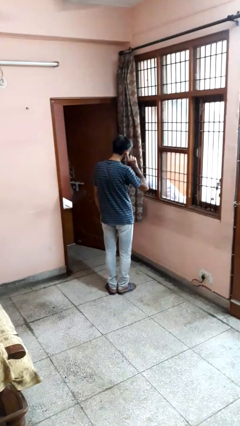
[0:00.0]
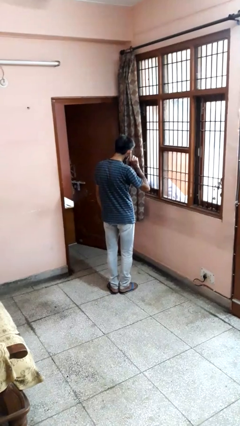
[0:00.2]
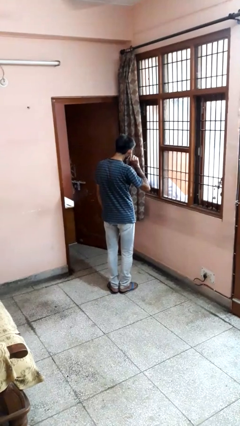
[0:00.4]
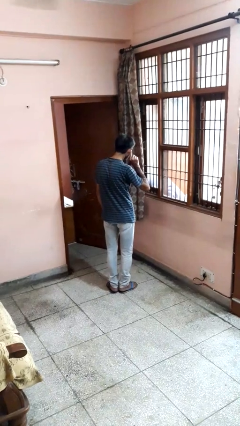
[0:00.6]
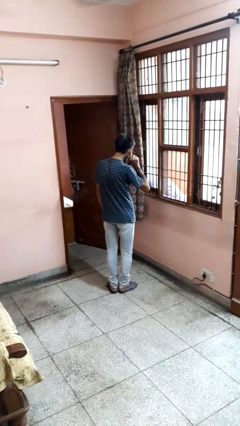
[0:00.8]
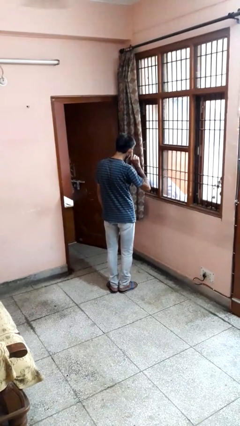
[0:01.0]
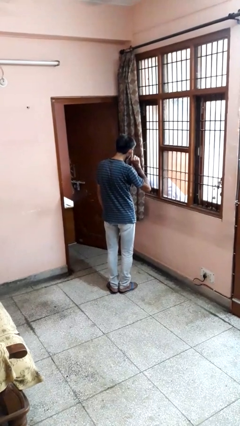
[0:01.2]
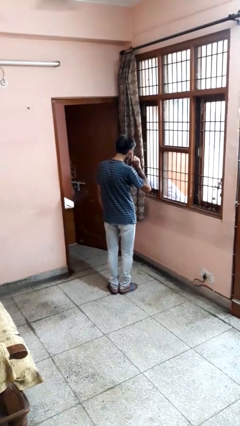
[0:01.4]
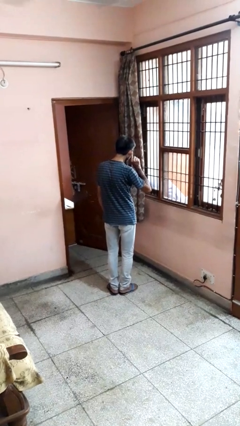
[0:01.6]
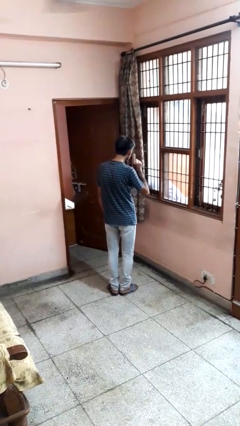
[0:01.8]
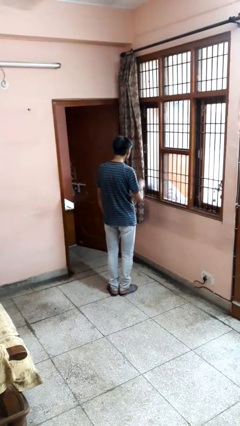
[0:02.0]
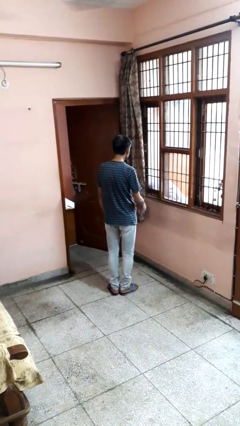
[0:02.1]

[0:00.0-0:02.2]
person gestures listen closely

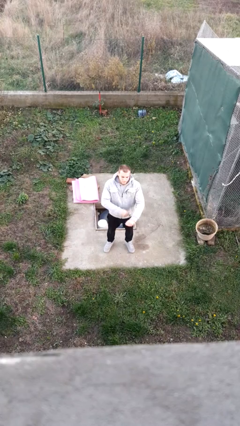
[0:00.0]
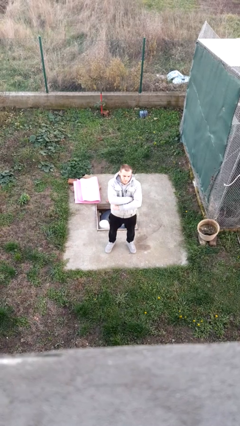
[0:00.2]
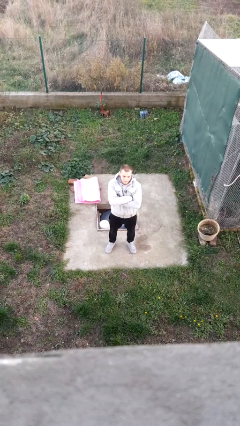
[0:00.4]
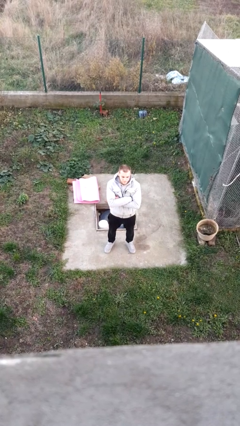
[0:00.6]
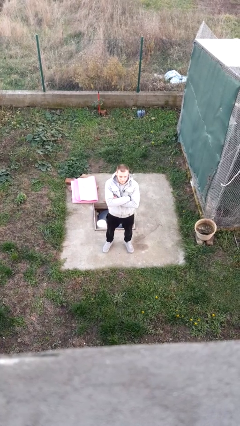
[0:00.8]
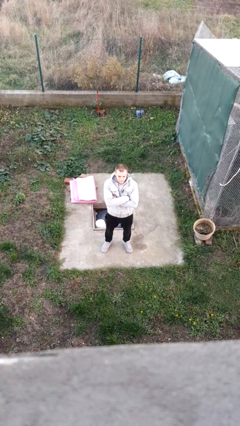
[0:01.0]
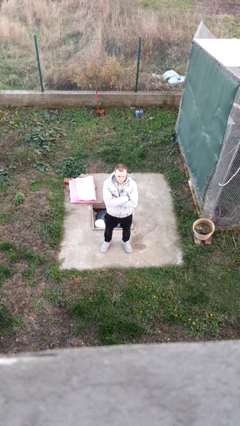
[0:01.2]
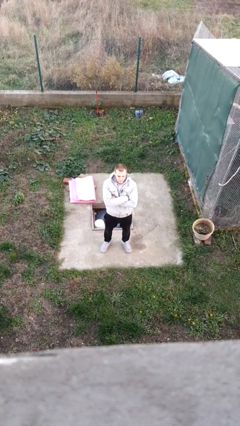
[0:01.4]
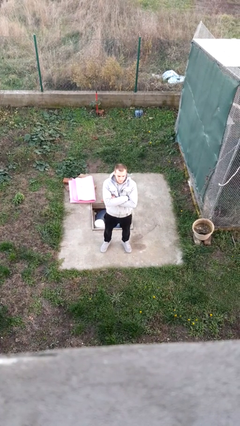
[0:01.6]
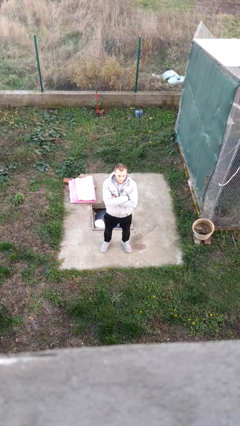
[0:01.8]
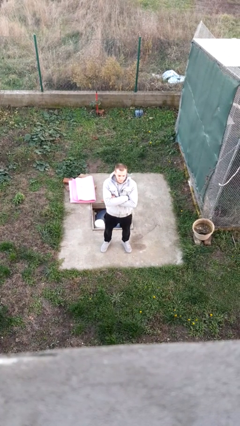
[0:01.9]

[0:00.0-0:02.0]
person crosses arms

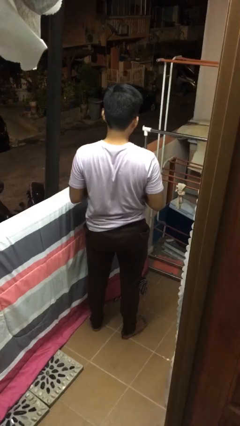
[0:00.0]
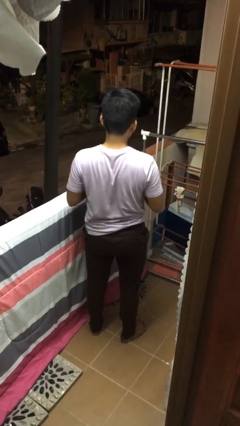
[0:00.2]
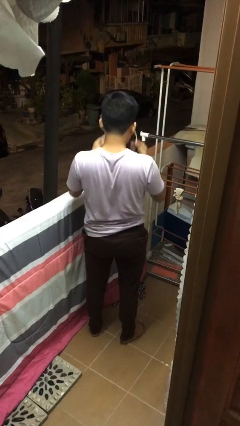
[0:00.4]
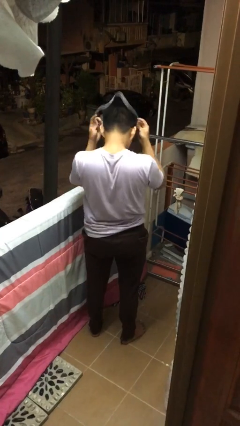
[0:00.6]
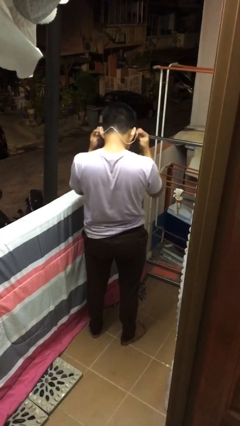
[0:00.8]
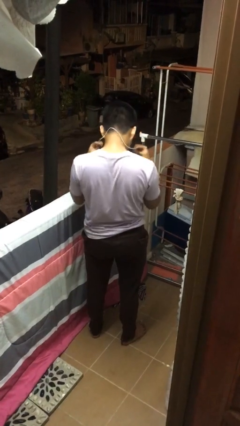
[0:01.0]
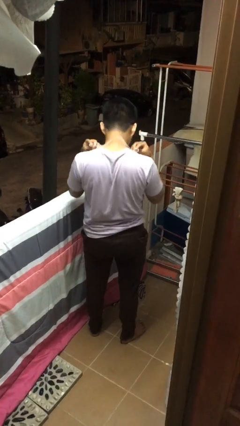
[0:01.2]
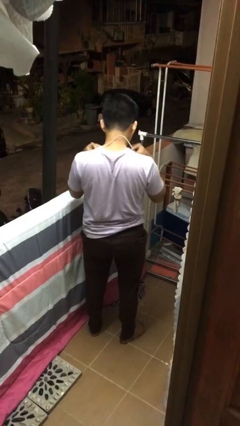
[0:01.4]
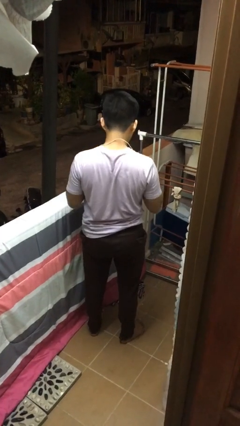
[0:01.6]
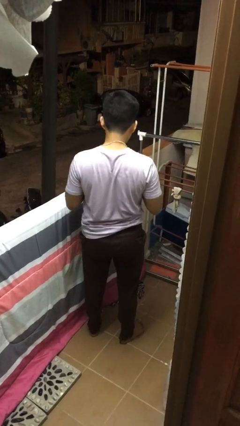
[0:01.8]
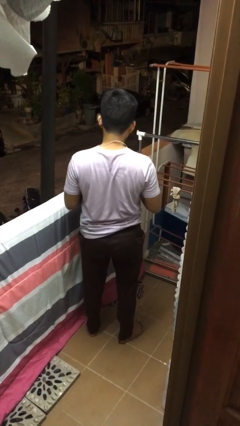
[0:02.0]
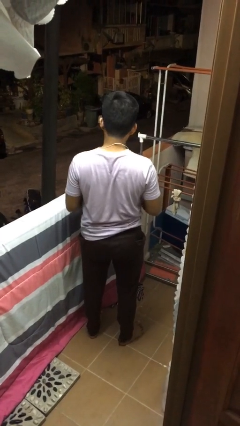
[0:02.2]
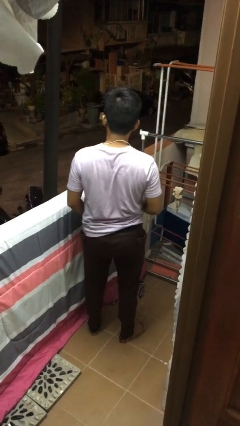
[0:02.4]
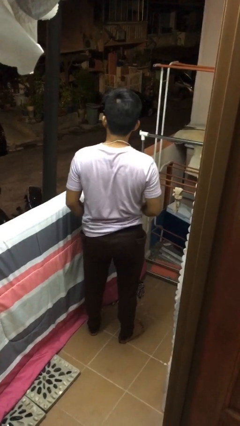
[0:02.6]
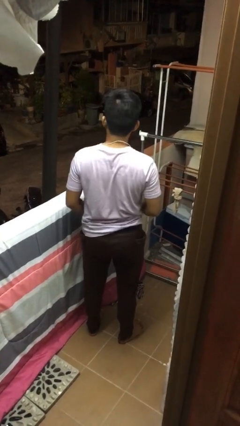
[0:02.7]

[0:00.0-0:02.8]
person puts on necklace

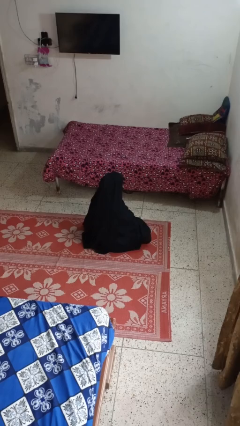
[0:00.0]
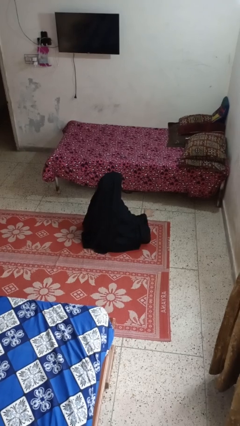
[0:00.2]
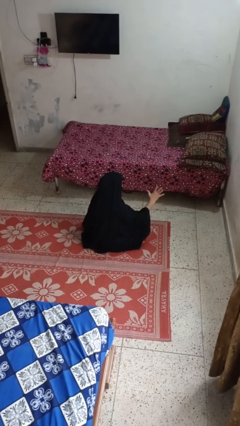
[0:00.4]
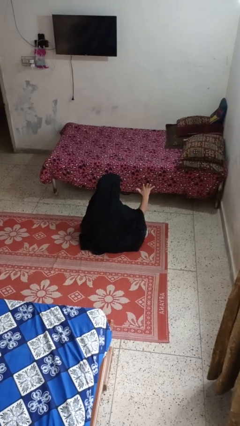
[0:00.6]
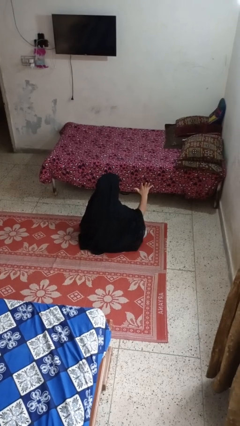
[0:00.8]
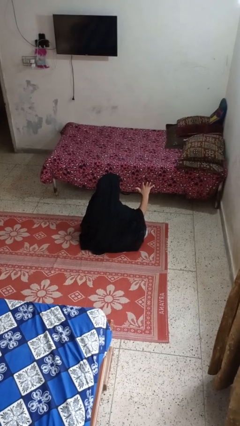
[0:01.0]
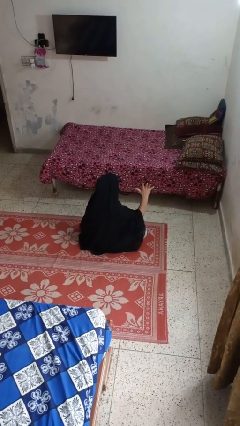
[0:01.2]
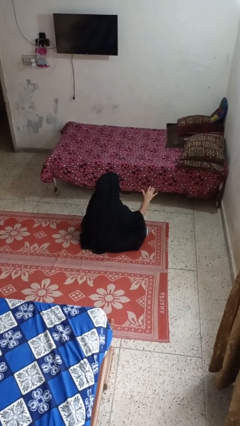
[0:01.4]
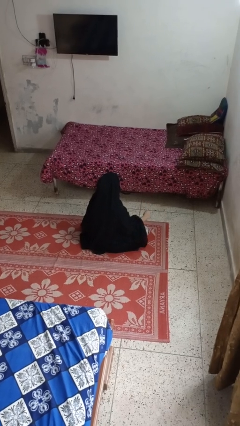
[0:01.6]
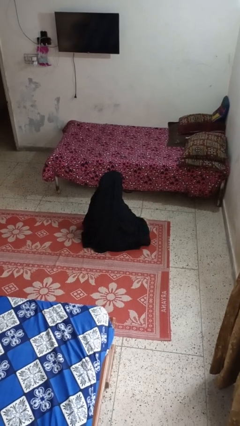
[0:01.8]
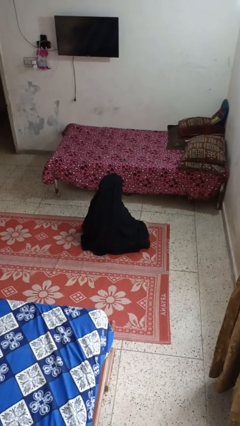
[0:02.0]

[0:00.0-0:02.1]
person gestures number five

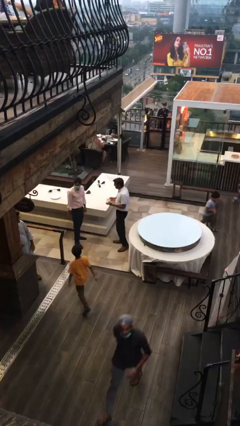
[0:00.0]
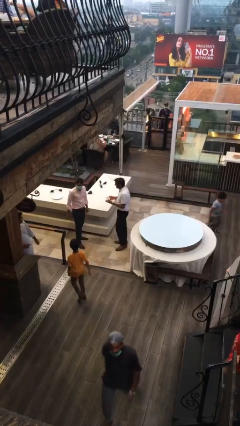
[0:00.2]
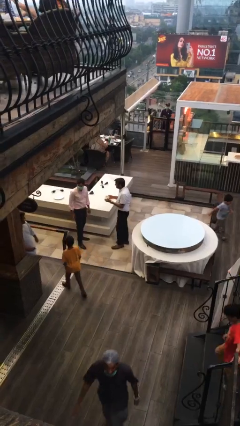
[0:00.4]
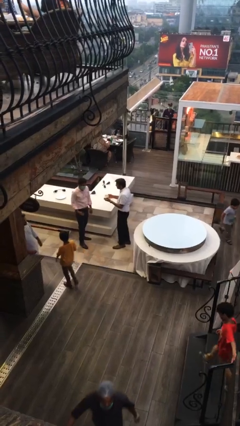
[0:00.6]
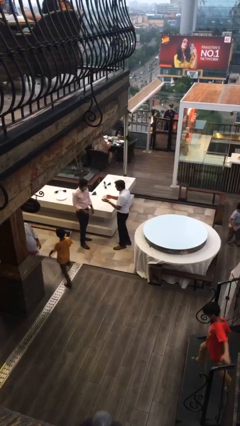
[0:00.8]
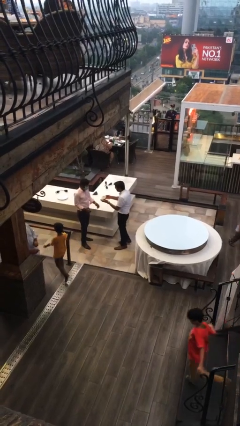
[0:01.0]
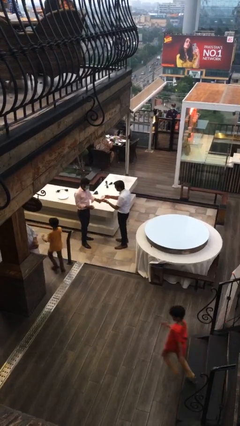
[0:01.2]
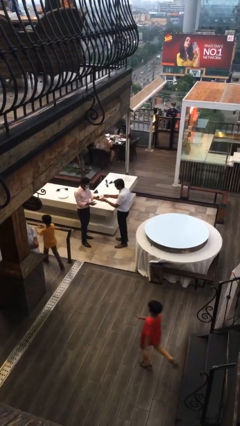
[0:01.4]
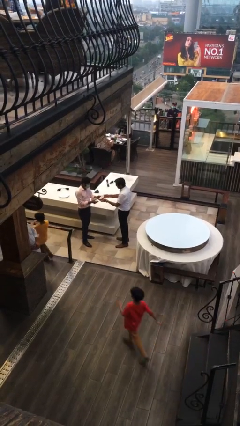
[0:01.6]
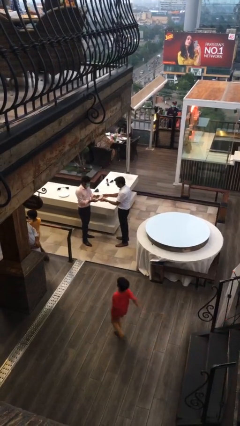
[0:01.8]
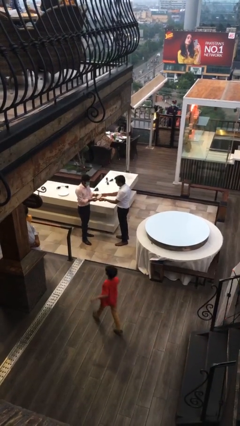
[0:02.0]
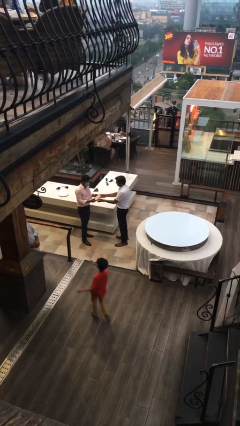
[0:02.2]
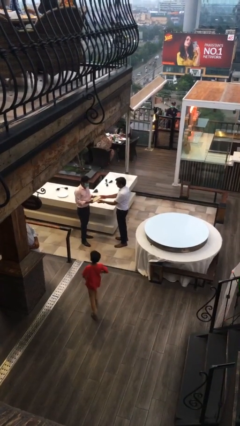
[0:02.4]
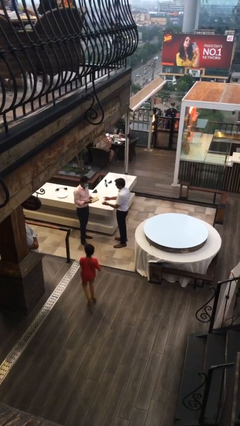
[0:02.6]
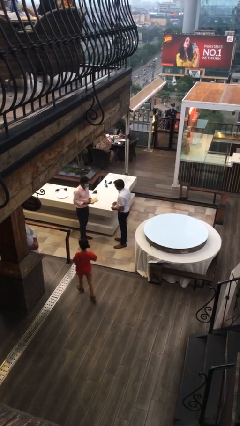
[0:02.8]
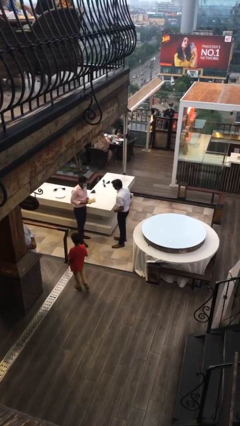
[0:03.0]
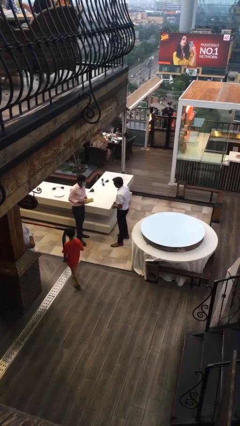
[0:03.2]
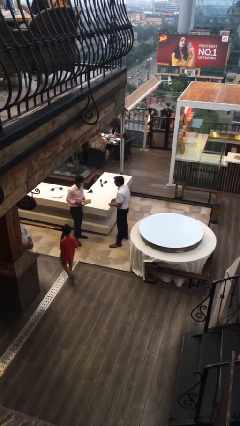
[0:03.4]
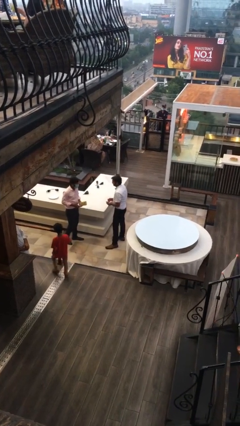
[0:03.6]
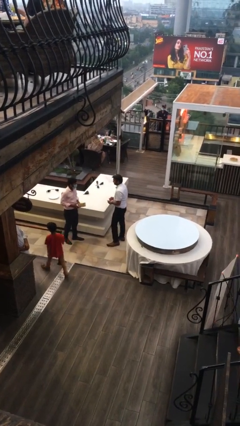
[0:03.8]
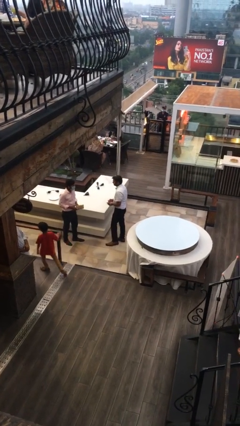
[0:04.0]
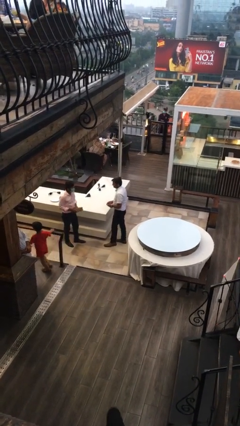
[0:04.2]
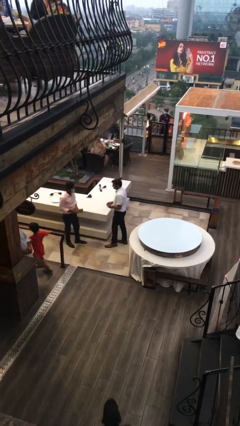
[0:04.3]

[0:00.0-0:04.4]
person transfers object to person

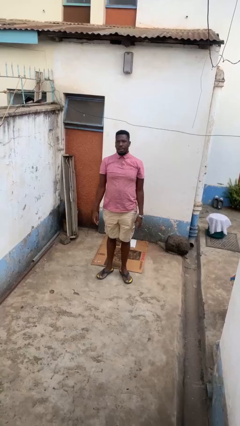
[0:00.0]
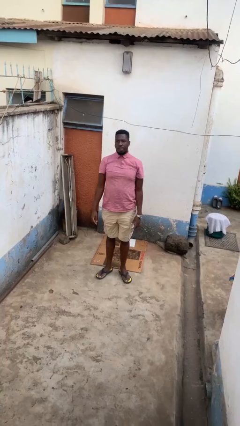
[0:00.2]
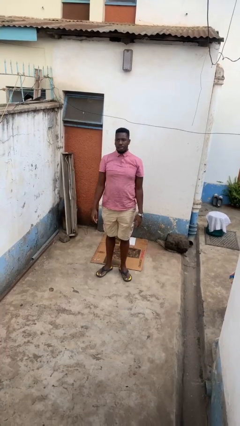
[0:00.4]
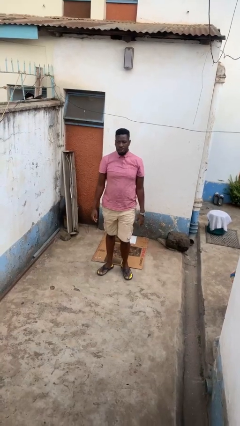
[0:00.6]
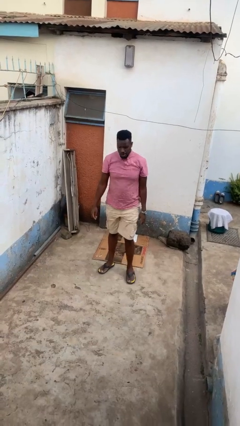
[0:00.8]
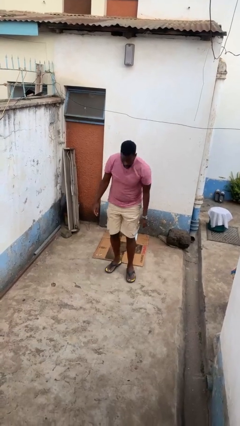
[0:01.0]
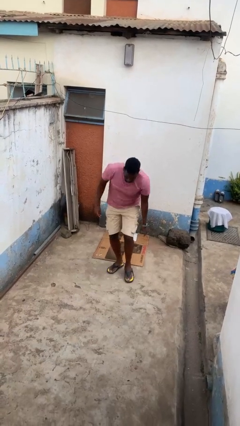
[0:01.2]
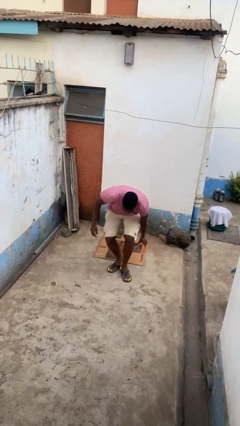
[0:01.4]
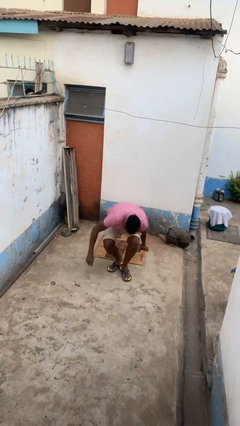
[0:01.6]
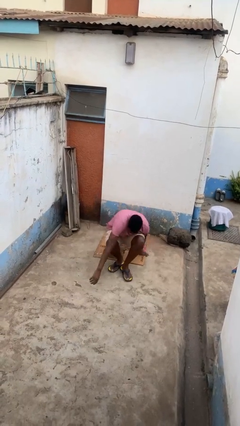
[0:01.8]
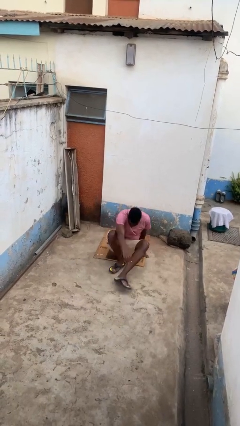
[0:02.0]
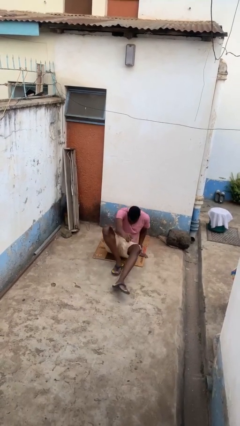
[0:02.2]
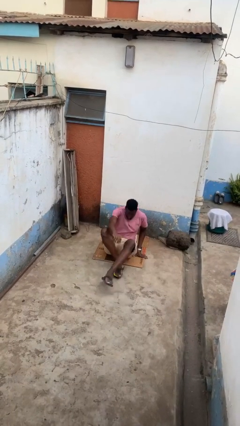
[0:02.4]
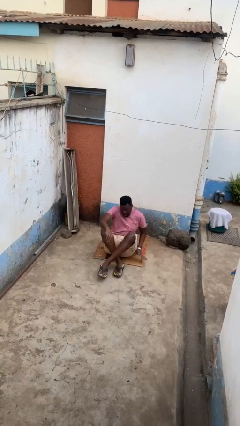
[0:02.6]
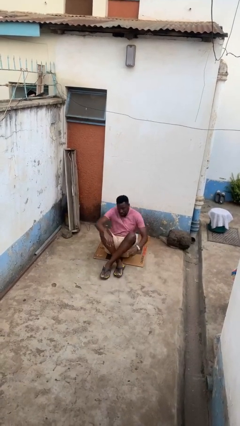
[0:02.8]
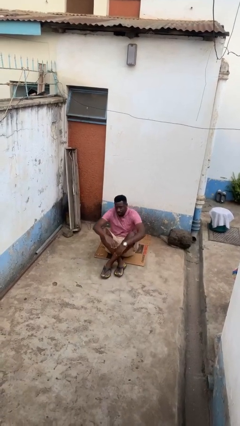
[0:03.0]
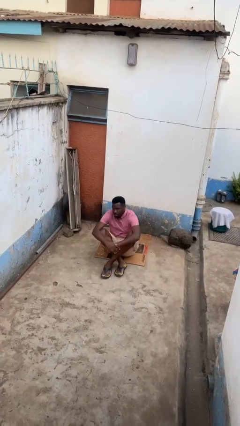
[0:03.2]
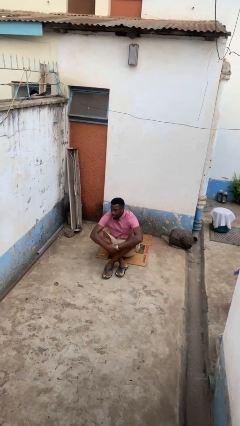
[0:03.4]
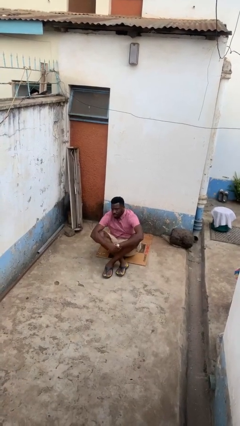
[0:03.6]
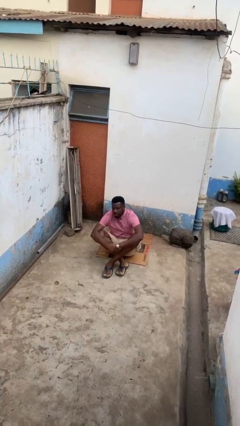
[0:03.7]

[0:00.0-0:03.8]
person sits crisscross
